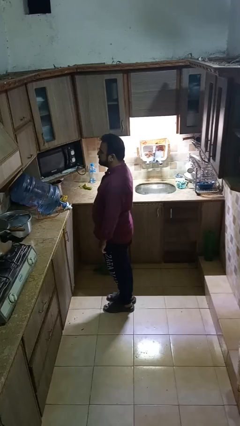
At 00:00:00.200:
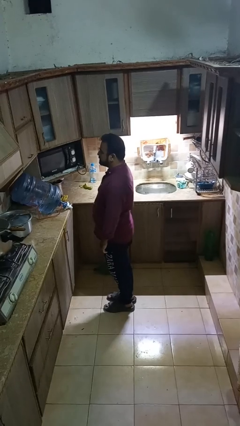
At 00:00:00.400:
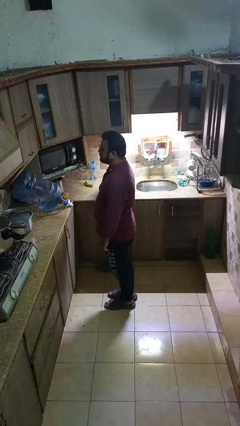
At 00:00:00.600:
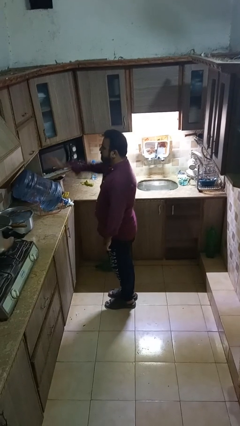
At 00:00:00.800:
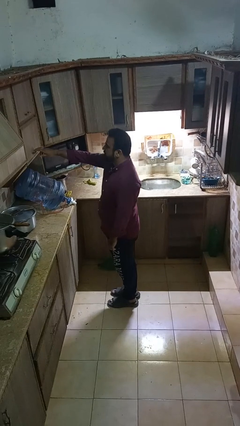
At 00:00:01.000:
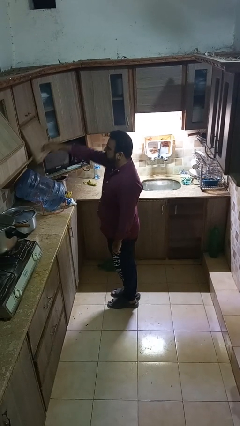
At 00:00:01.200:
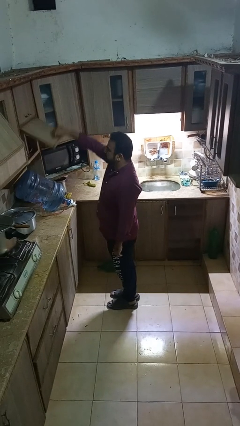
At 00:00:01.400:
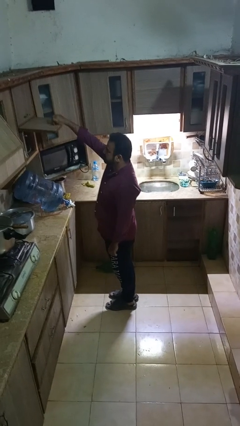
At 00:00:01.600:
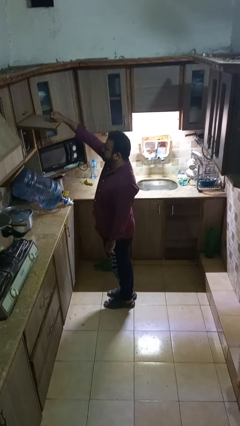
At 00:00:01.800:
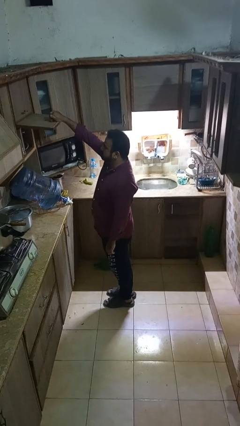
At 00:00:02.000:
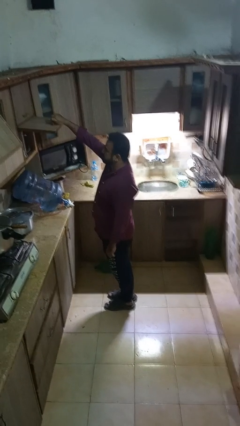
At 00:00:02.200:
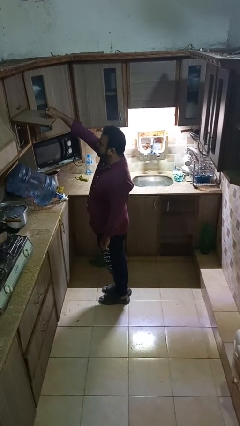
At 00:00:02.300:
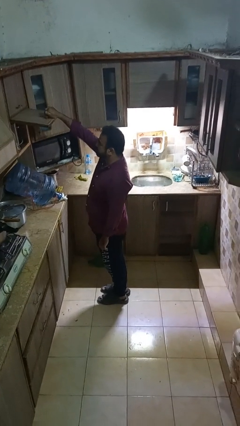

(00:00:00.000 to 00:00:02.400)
person opens cabinet

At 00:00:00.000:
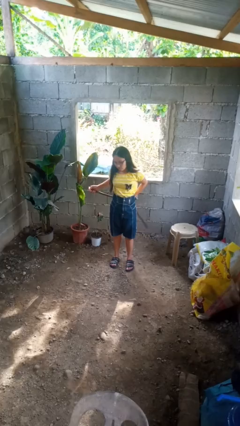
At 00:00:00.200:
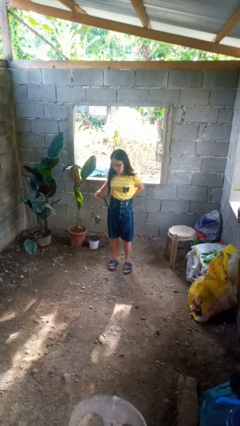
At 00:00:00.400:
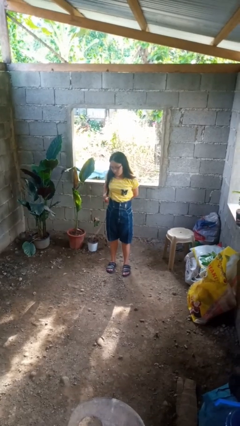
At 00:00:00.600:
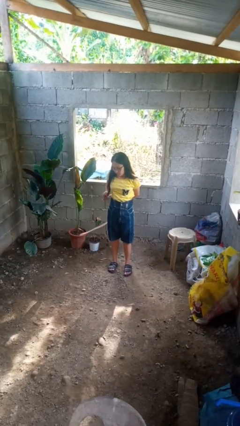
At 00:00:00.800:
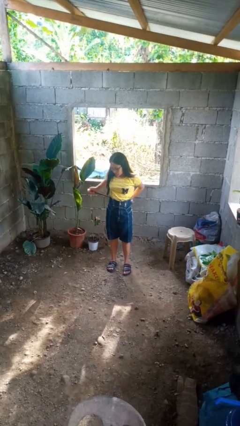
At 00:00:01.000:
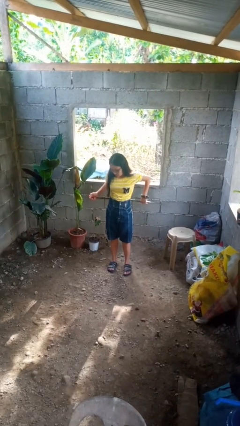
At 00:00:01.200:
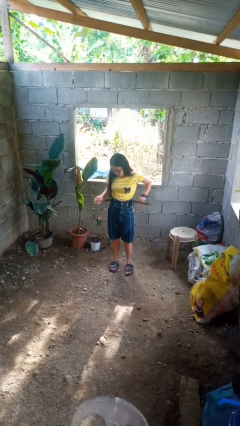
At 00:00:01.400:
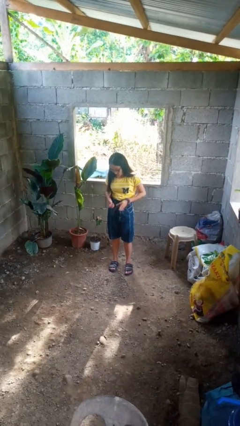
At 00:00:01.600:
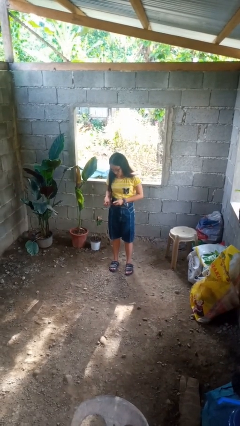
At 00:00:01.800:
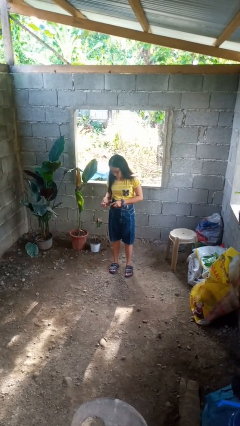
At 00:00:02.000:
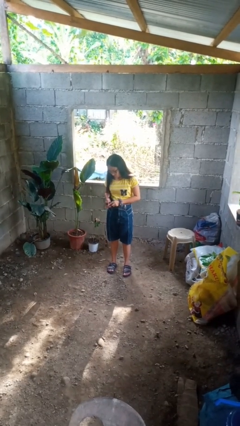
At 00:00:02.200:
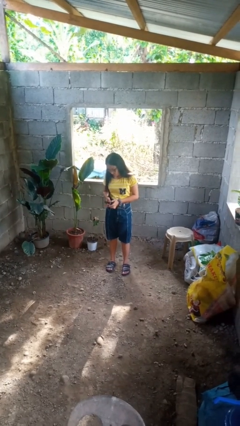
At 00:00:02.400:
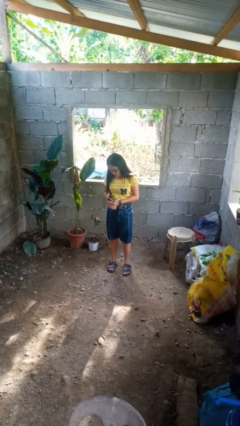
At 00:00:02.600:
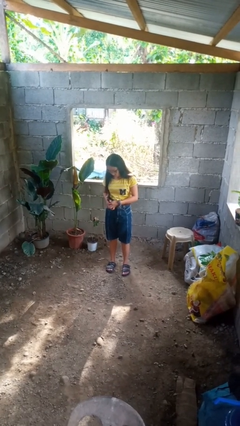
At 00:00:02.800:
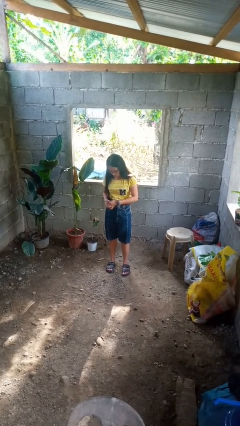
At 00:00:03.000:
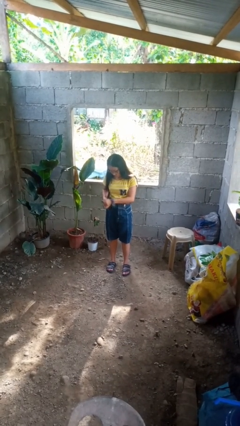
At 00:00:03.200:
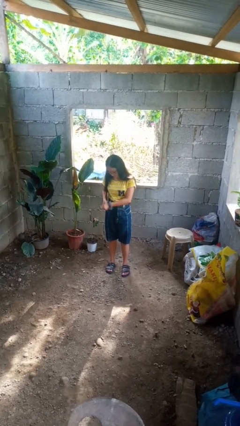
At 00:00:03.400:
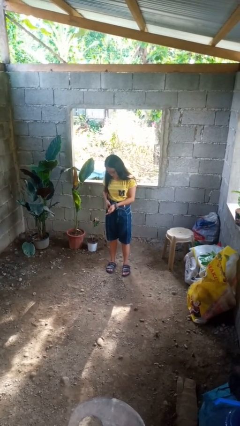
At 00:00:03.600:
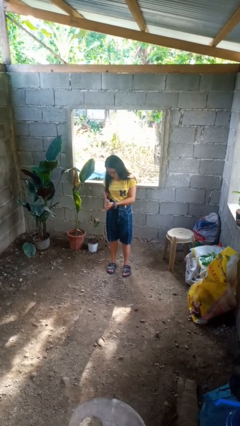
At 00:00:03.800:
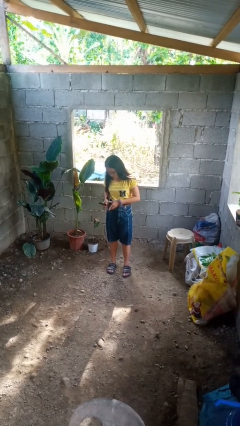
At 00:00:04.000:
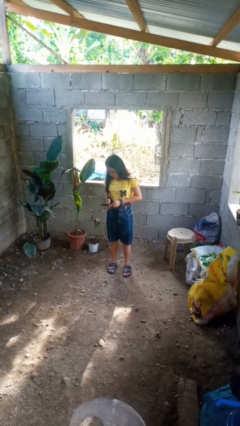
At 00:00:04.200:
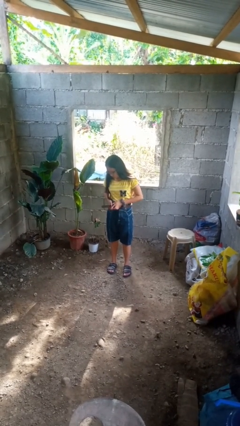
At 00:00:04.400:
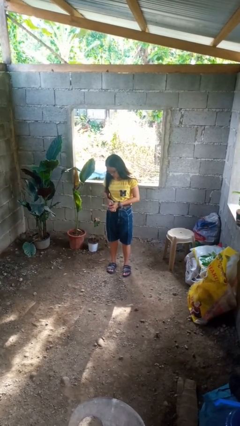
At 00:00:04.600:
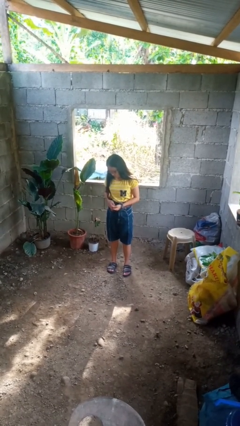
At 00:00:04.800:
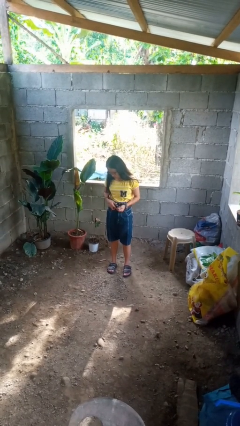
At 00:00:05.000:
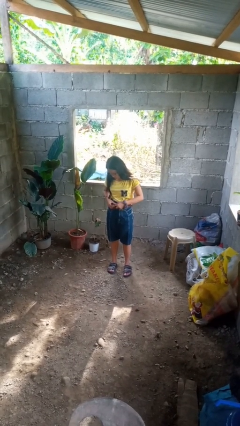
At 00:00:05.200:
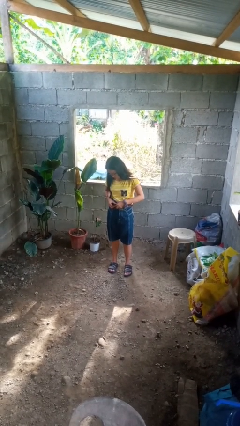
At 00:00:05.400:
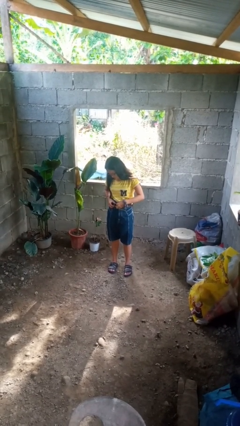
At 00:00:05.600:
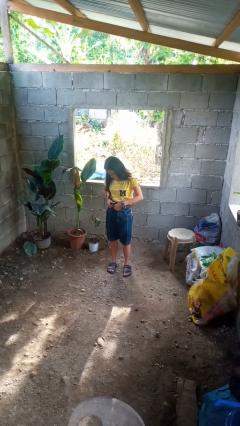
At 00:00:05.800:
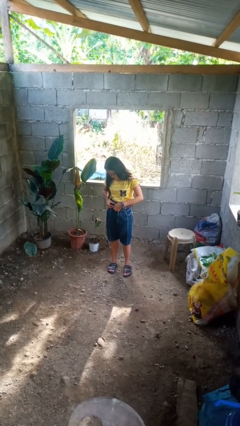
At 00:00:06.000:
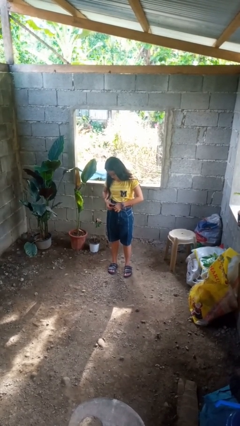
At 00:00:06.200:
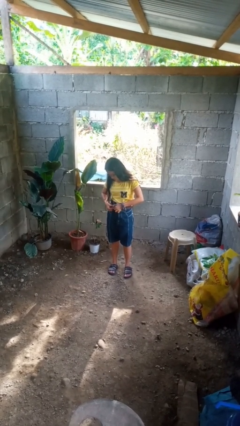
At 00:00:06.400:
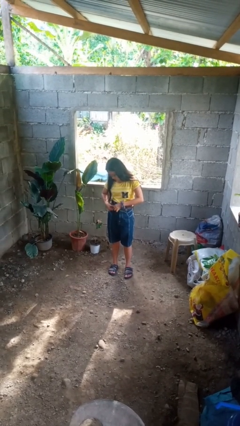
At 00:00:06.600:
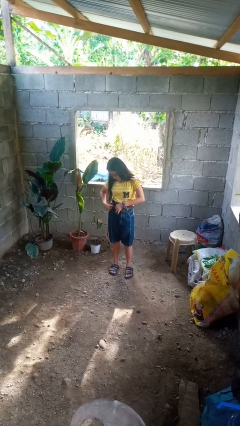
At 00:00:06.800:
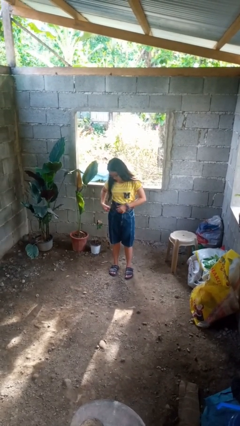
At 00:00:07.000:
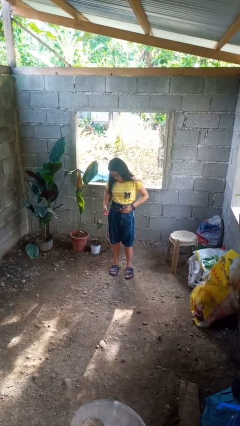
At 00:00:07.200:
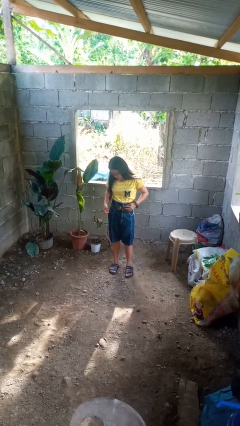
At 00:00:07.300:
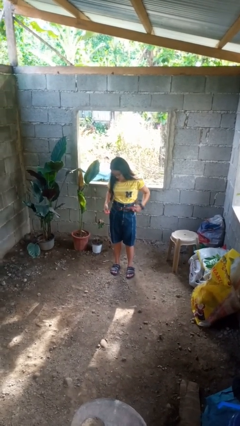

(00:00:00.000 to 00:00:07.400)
person puts on belt

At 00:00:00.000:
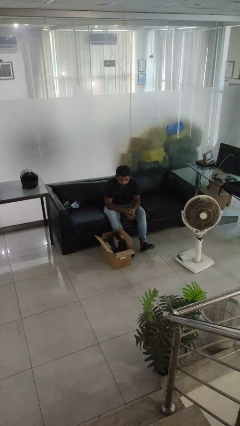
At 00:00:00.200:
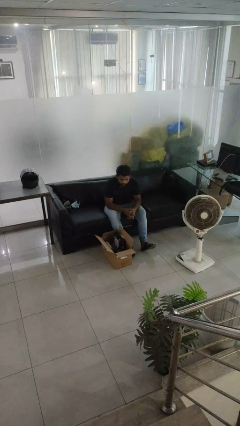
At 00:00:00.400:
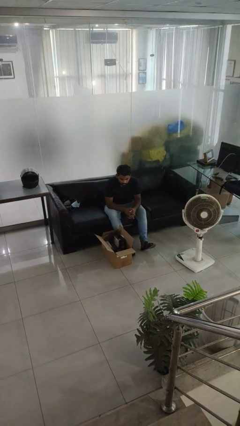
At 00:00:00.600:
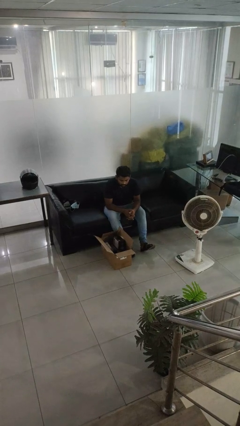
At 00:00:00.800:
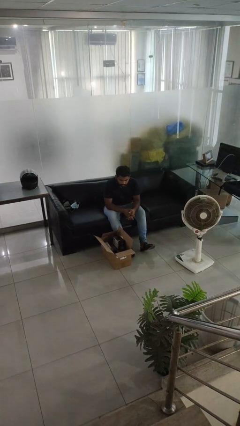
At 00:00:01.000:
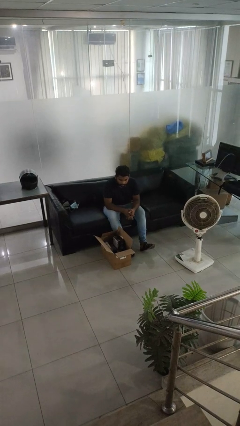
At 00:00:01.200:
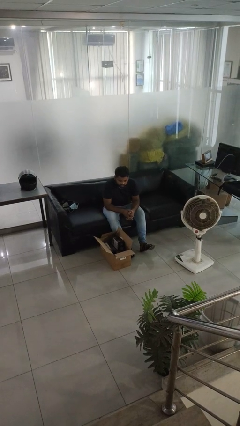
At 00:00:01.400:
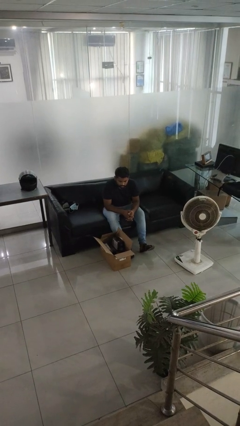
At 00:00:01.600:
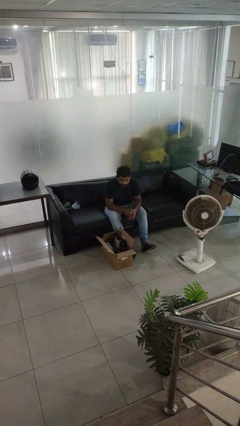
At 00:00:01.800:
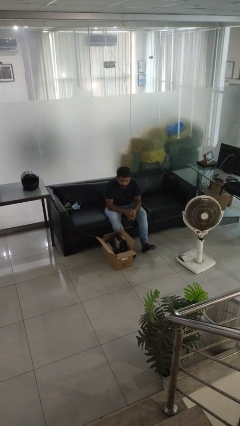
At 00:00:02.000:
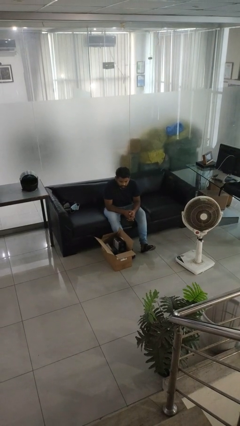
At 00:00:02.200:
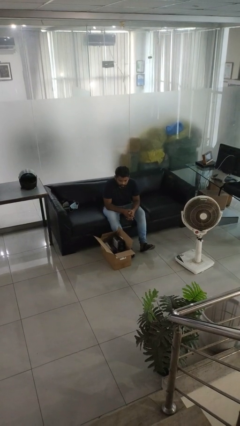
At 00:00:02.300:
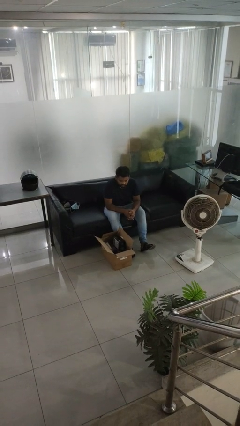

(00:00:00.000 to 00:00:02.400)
person takes object from box

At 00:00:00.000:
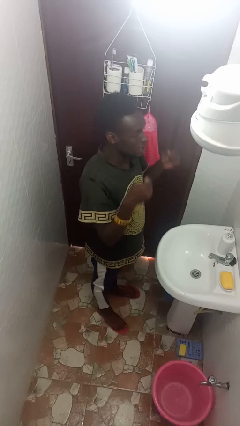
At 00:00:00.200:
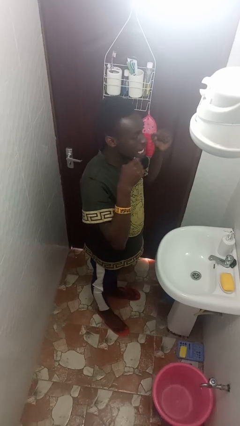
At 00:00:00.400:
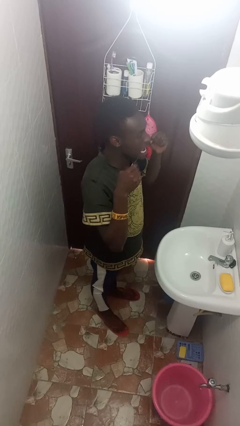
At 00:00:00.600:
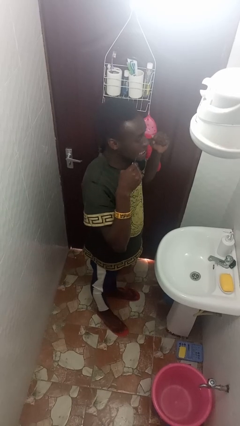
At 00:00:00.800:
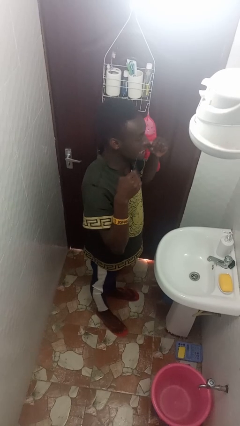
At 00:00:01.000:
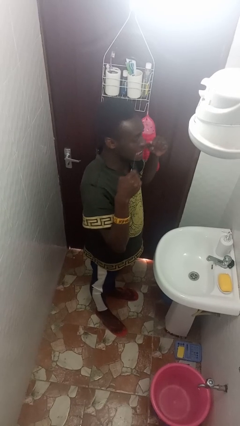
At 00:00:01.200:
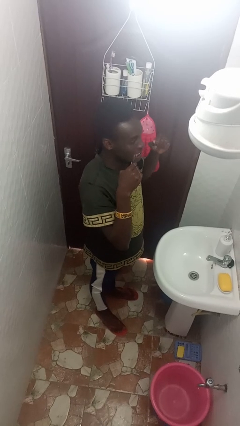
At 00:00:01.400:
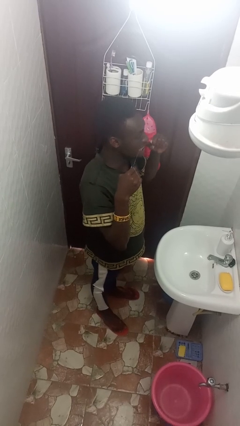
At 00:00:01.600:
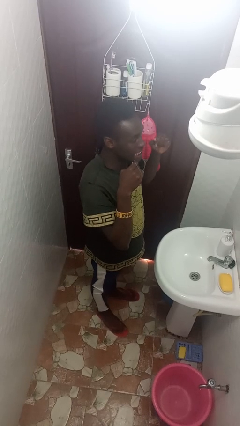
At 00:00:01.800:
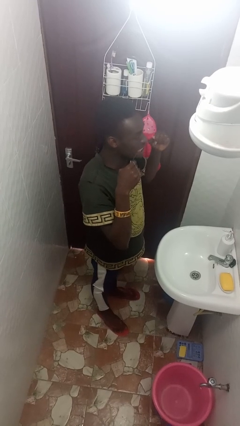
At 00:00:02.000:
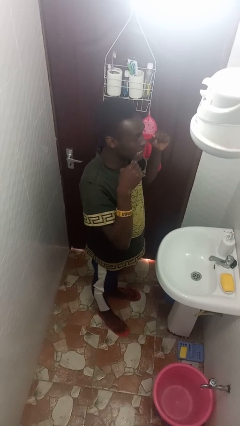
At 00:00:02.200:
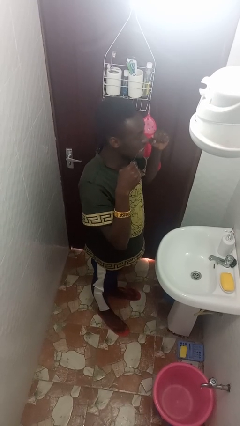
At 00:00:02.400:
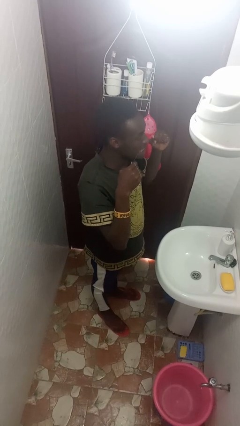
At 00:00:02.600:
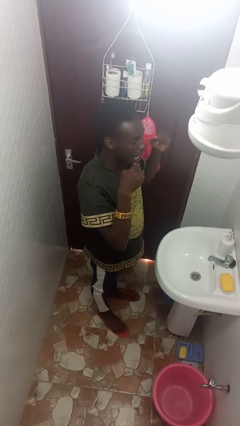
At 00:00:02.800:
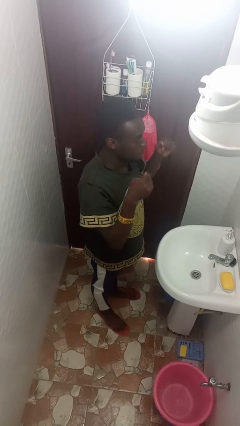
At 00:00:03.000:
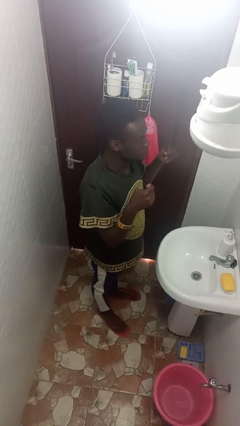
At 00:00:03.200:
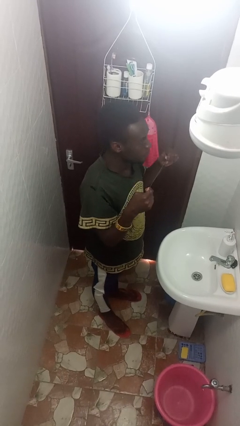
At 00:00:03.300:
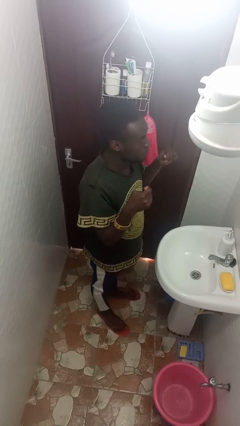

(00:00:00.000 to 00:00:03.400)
person flosses

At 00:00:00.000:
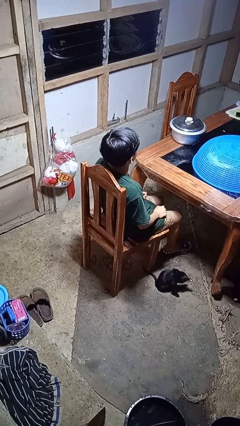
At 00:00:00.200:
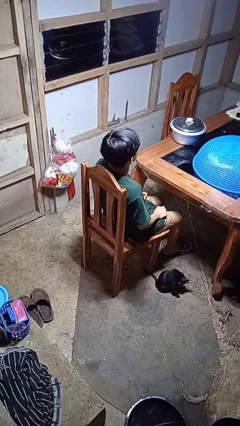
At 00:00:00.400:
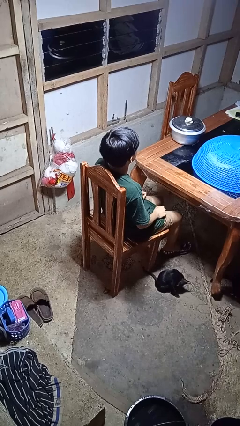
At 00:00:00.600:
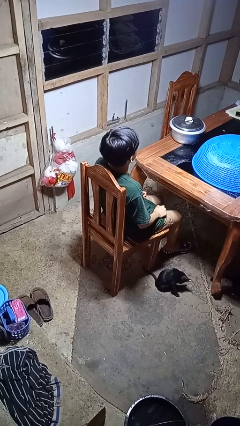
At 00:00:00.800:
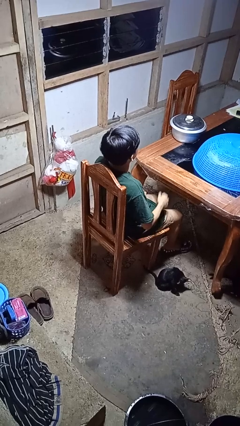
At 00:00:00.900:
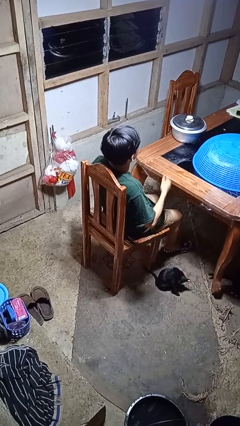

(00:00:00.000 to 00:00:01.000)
person drums on chest

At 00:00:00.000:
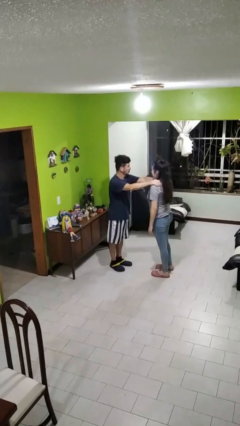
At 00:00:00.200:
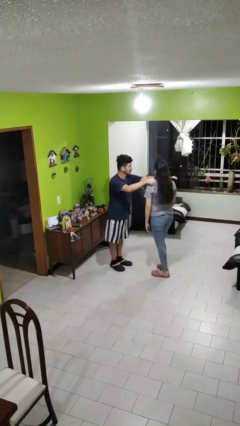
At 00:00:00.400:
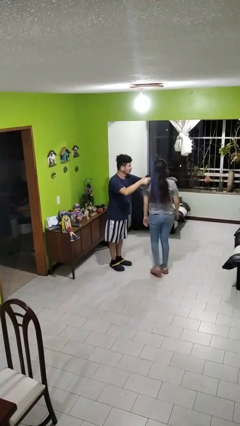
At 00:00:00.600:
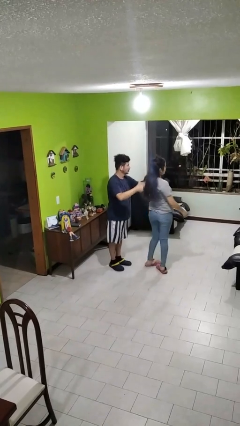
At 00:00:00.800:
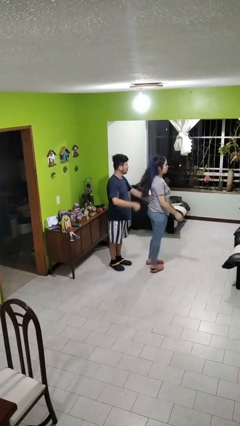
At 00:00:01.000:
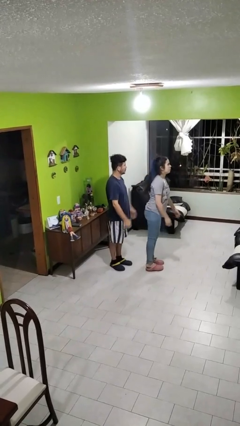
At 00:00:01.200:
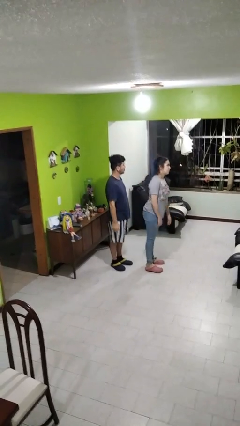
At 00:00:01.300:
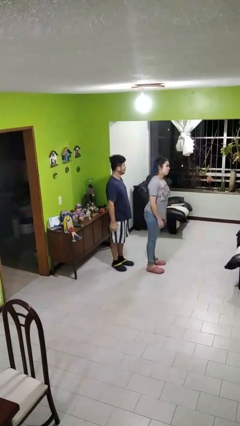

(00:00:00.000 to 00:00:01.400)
person spins person around
